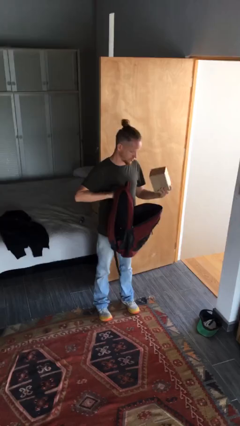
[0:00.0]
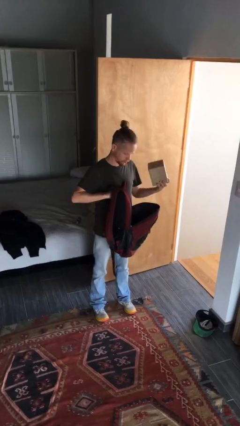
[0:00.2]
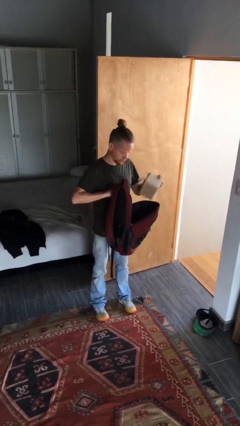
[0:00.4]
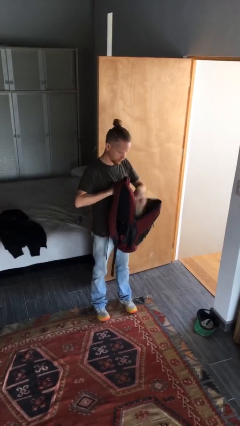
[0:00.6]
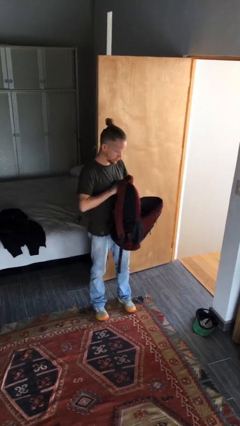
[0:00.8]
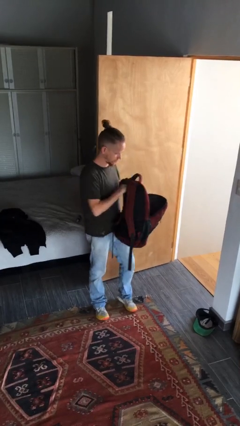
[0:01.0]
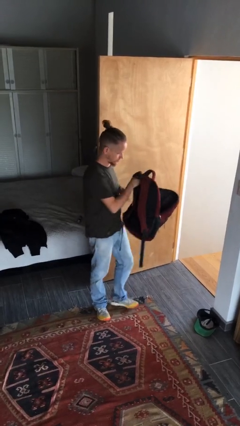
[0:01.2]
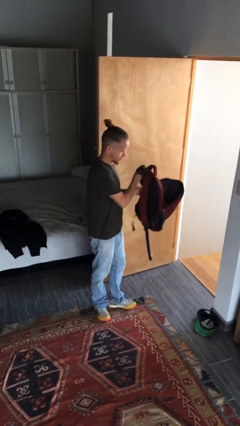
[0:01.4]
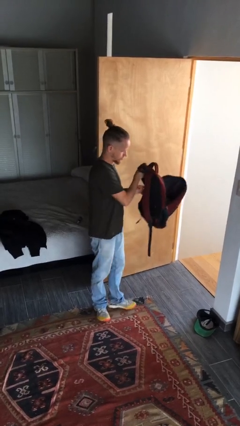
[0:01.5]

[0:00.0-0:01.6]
person puts object into backpack

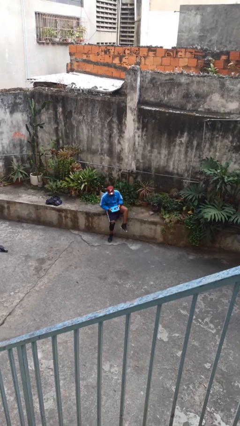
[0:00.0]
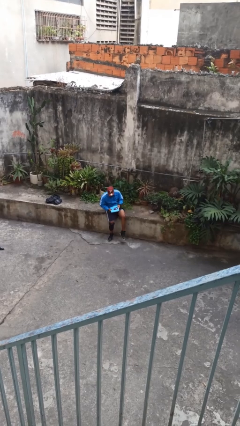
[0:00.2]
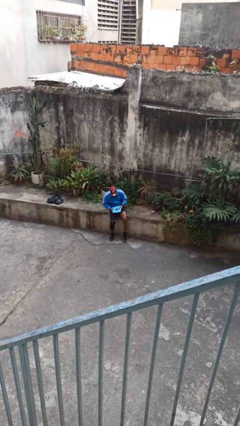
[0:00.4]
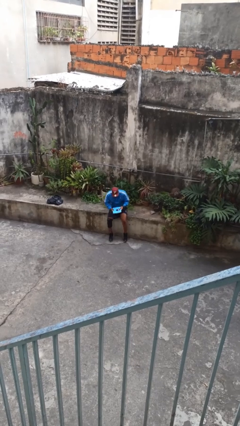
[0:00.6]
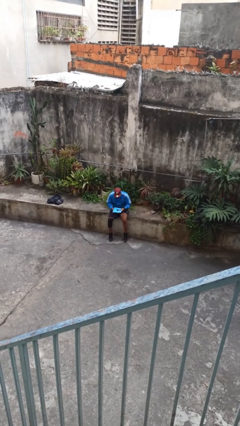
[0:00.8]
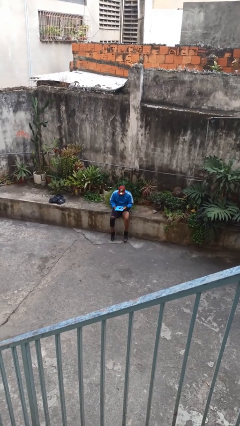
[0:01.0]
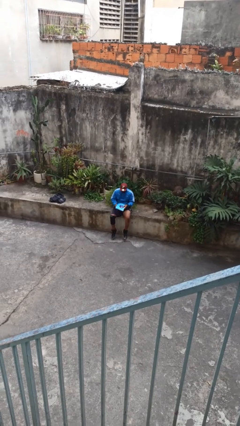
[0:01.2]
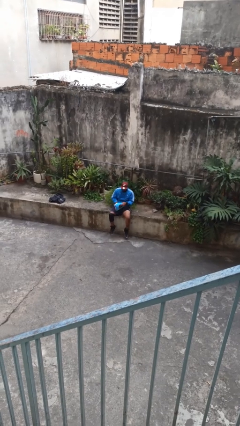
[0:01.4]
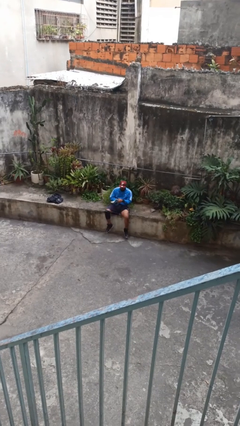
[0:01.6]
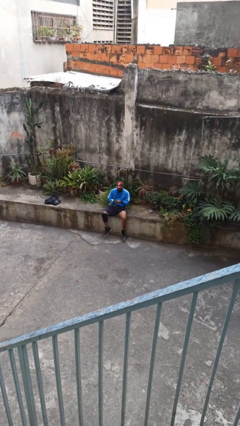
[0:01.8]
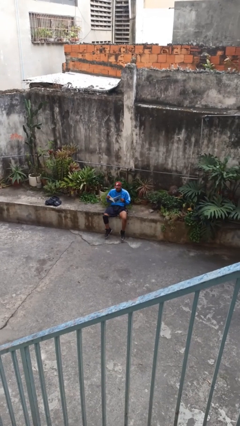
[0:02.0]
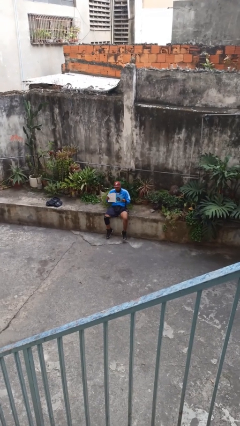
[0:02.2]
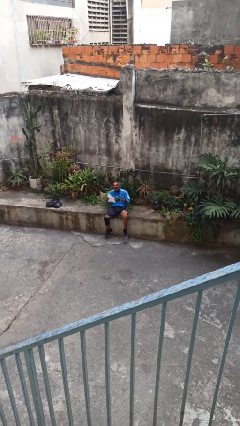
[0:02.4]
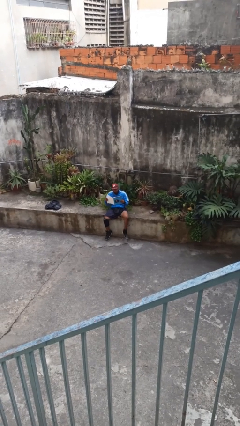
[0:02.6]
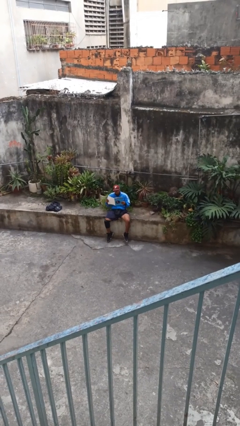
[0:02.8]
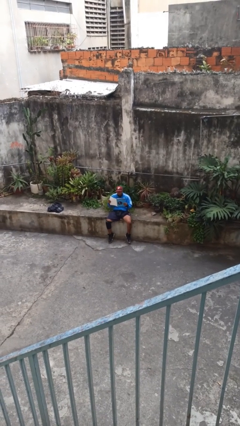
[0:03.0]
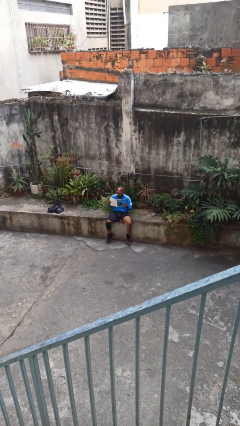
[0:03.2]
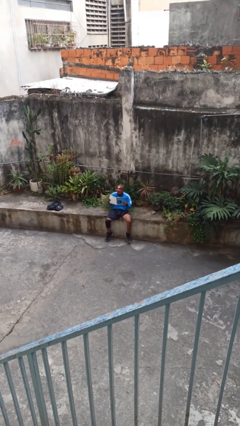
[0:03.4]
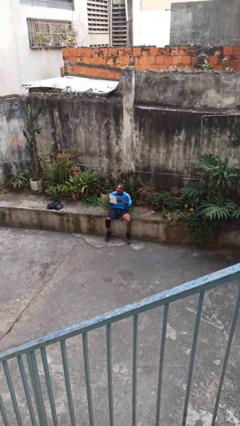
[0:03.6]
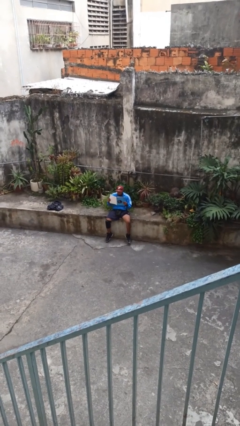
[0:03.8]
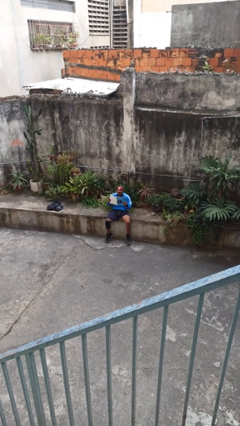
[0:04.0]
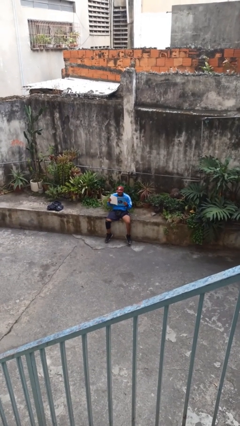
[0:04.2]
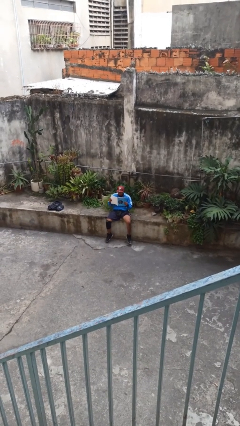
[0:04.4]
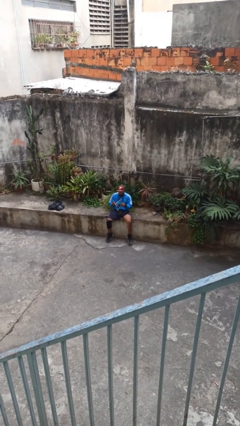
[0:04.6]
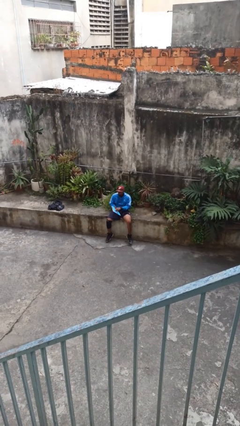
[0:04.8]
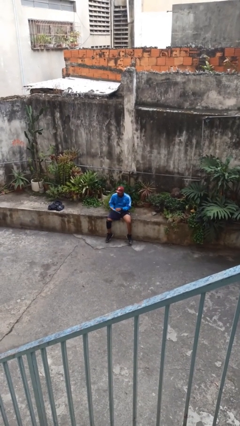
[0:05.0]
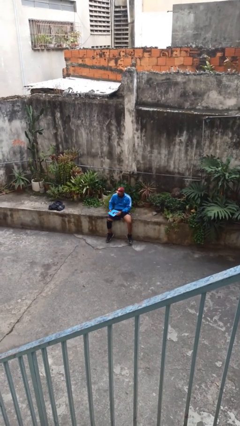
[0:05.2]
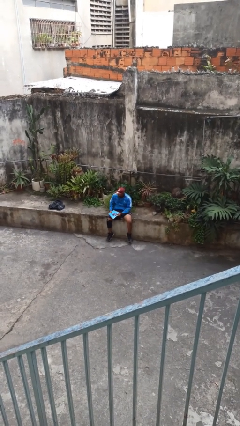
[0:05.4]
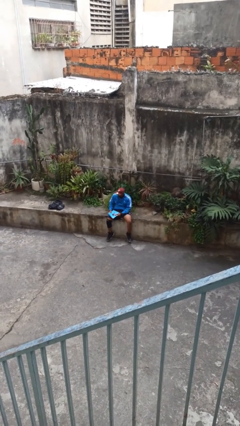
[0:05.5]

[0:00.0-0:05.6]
person reads document

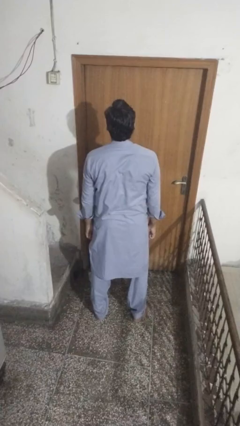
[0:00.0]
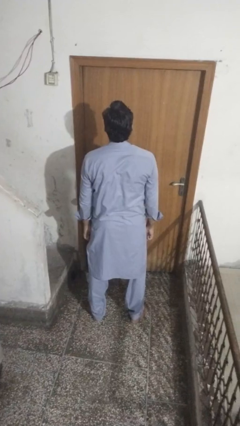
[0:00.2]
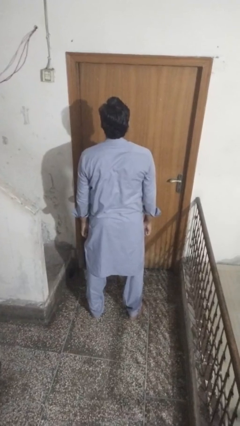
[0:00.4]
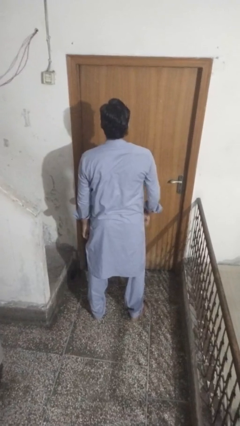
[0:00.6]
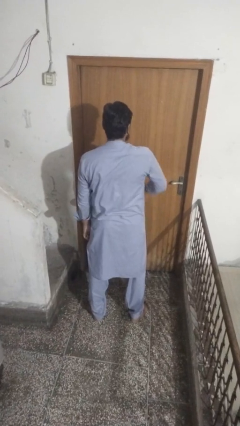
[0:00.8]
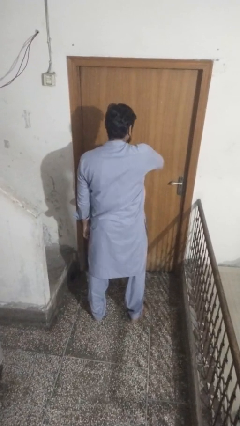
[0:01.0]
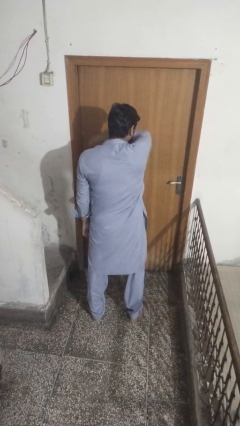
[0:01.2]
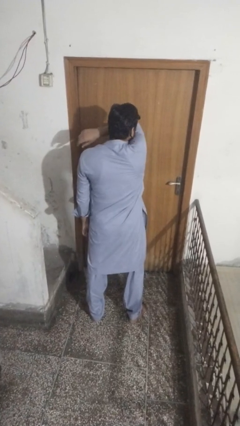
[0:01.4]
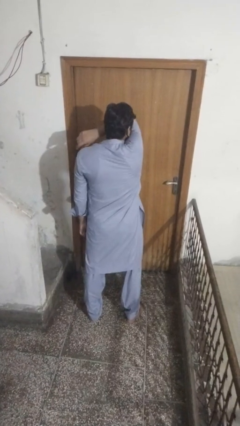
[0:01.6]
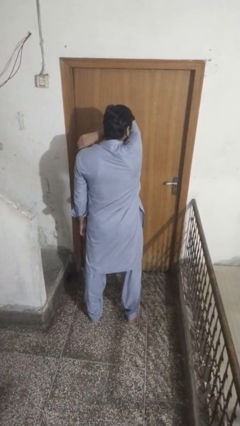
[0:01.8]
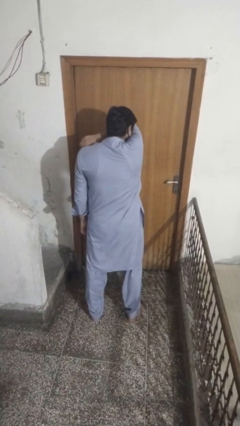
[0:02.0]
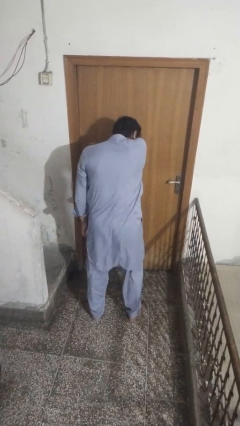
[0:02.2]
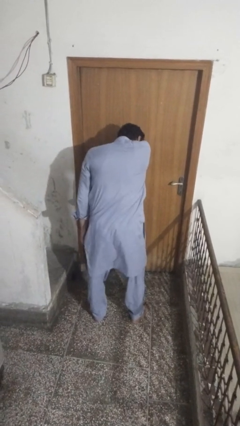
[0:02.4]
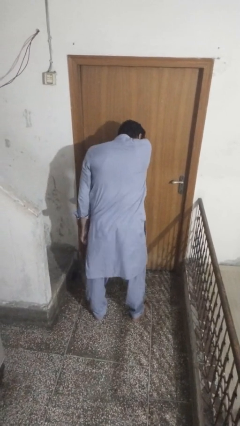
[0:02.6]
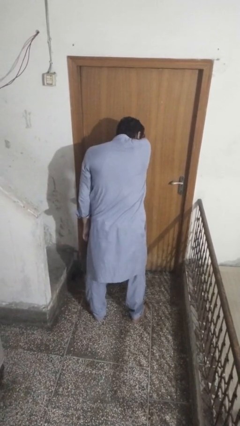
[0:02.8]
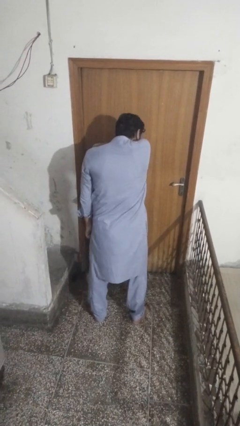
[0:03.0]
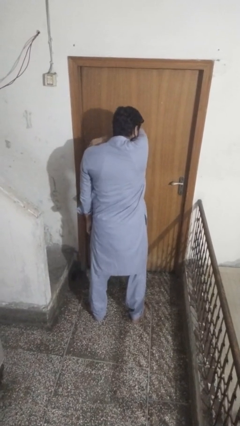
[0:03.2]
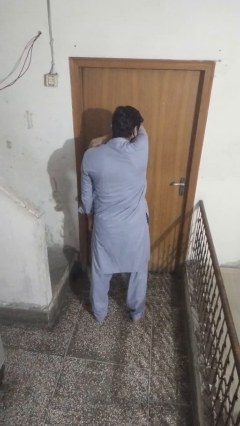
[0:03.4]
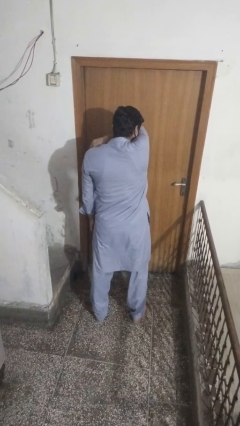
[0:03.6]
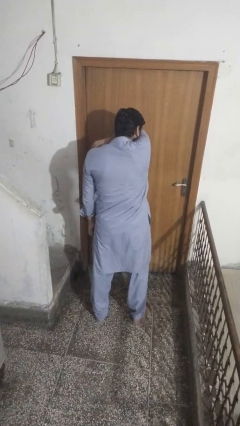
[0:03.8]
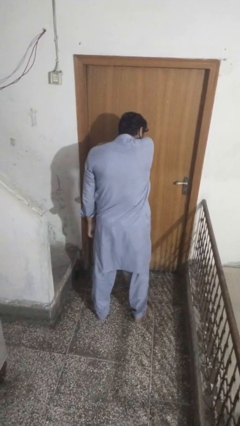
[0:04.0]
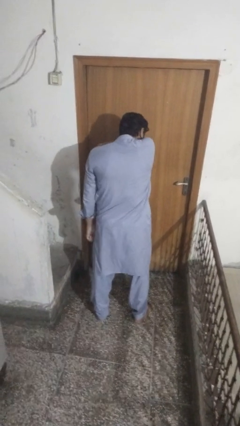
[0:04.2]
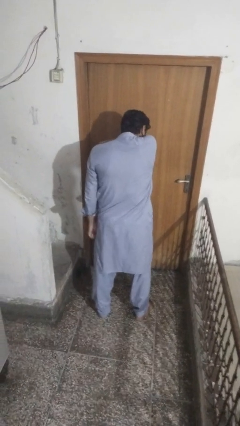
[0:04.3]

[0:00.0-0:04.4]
person sneezes into arm

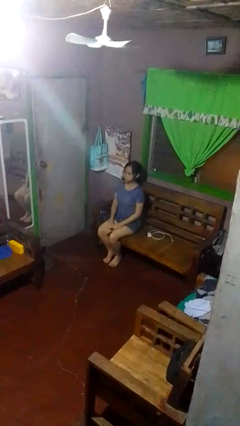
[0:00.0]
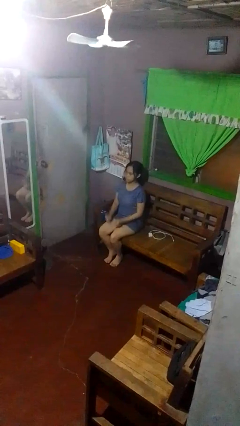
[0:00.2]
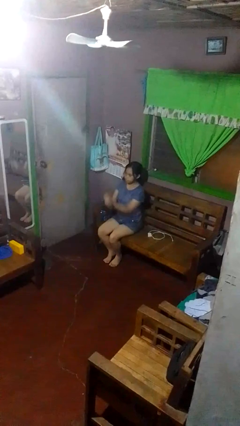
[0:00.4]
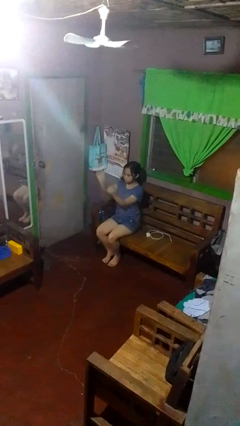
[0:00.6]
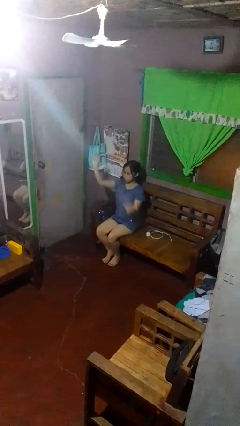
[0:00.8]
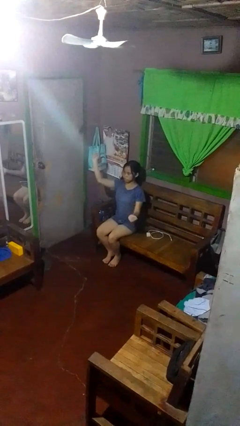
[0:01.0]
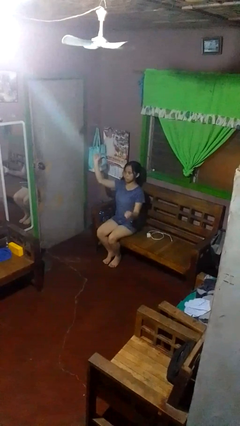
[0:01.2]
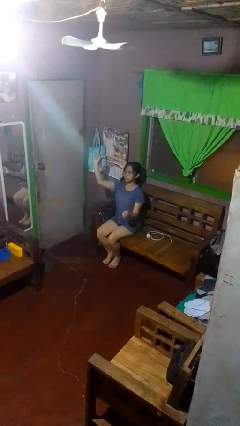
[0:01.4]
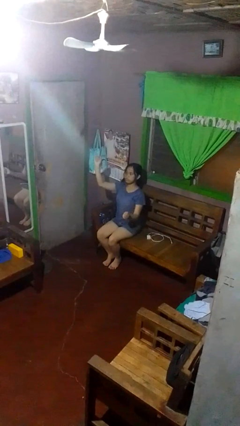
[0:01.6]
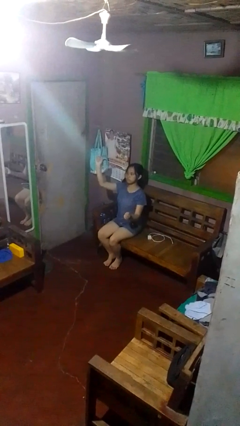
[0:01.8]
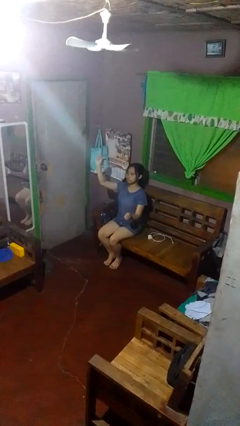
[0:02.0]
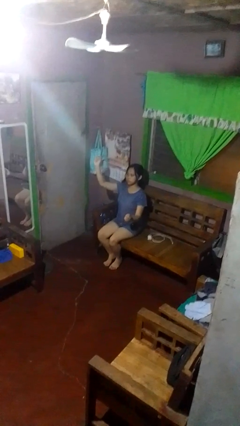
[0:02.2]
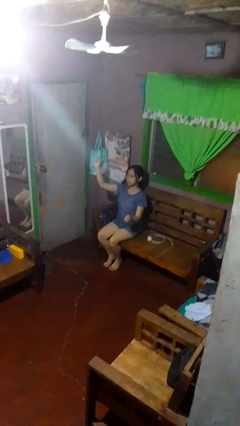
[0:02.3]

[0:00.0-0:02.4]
person gestures zoom in

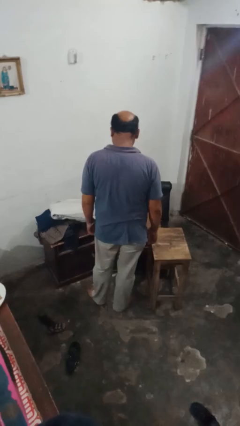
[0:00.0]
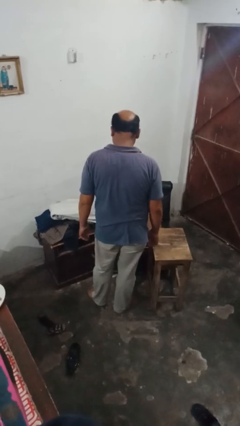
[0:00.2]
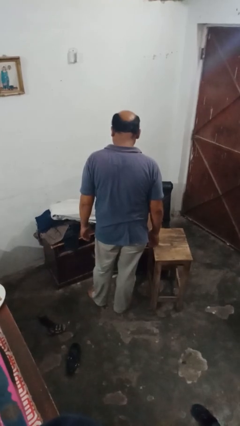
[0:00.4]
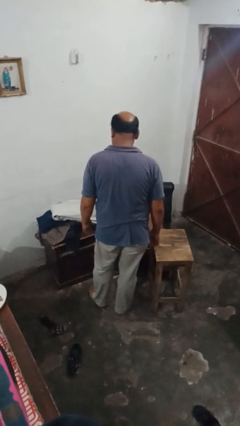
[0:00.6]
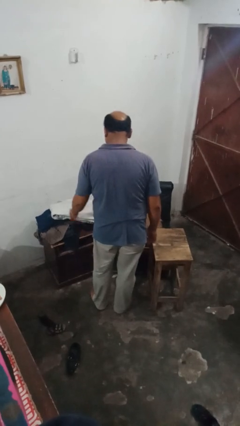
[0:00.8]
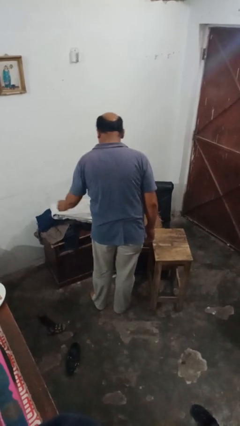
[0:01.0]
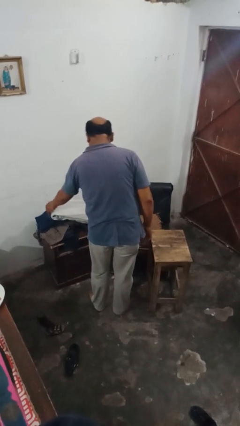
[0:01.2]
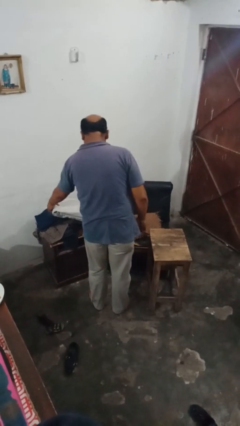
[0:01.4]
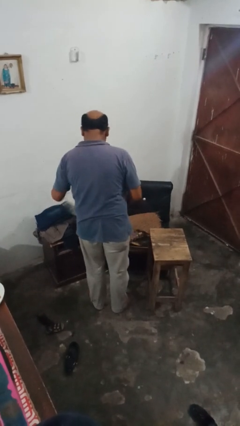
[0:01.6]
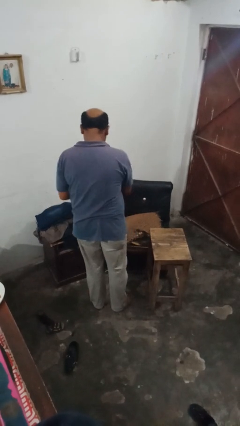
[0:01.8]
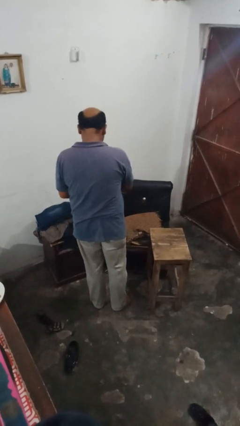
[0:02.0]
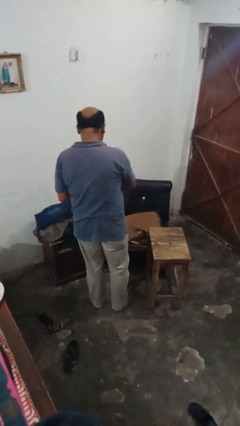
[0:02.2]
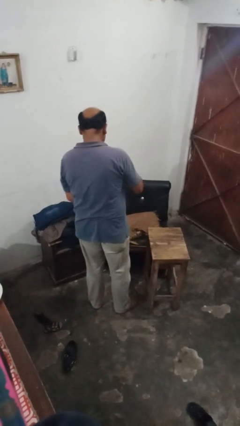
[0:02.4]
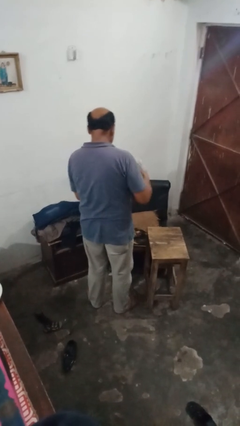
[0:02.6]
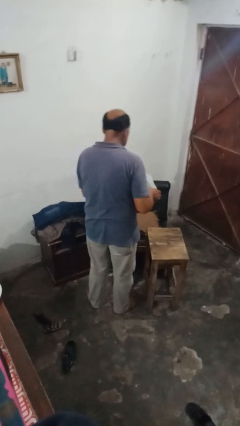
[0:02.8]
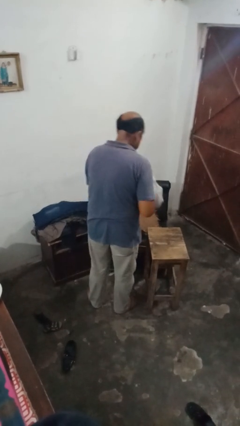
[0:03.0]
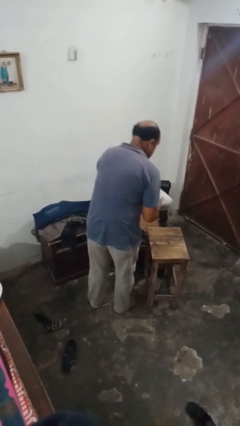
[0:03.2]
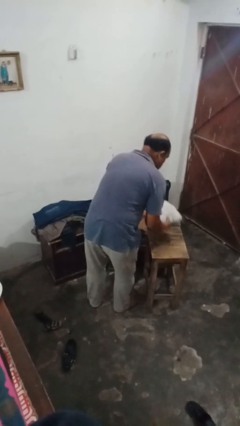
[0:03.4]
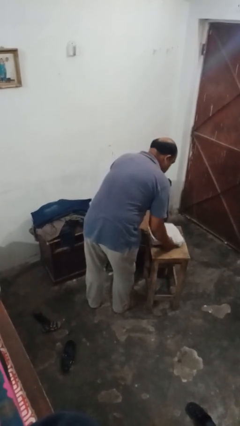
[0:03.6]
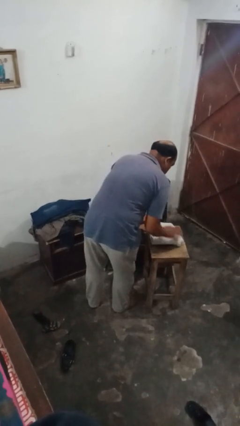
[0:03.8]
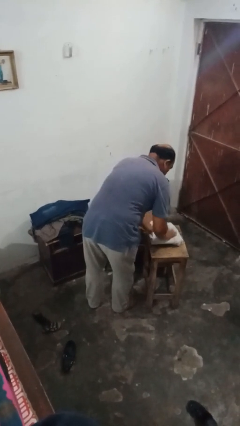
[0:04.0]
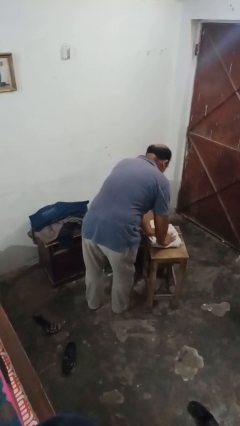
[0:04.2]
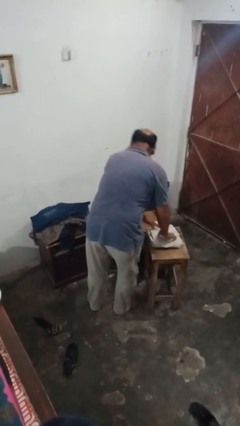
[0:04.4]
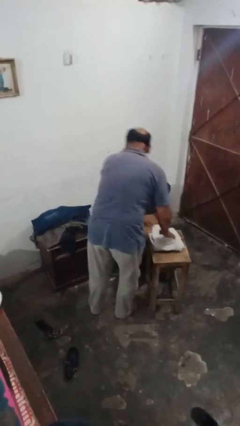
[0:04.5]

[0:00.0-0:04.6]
person folds pants
